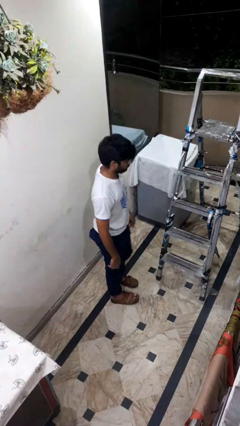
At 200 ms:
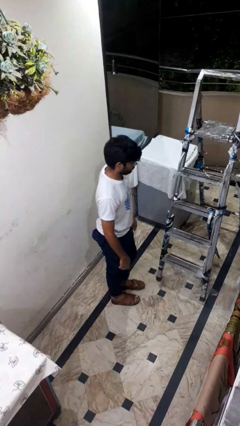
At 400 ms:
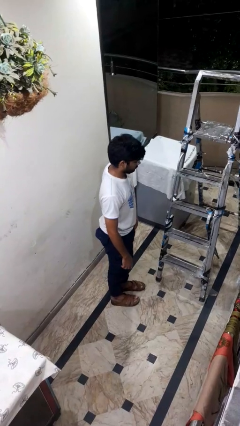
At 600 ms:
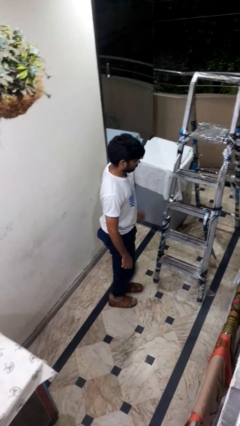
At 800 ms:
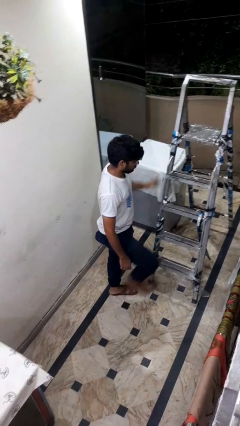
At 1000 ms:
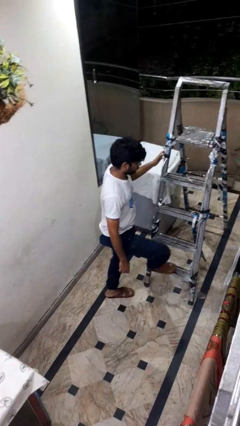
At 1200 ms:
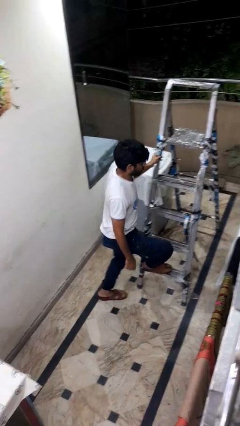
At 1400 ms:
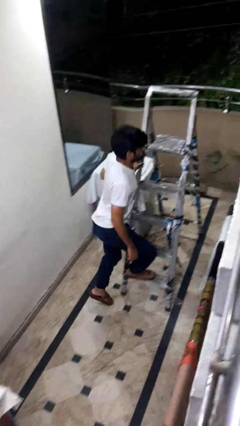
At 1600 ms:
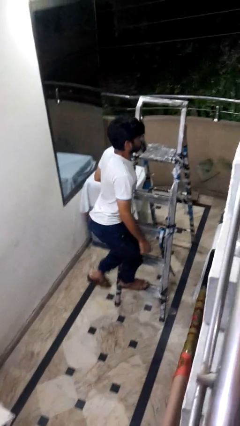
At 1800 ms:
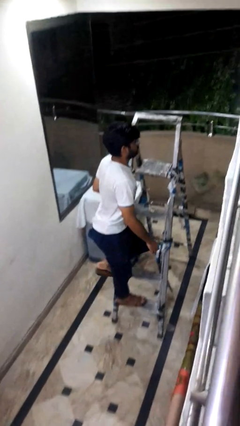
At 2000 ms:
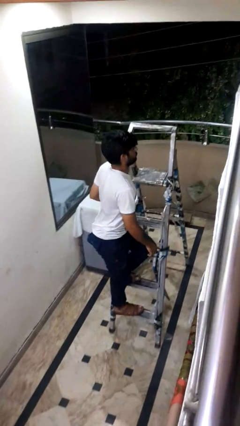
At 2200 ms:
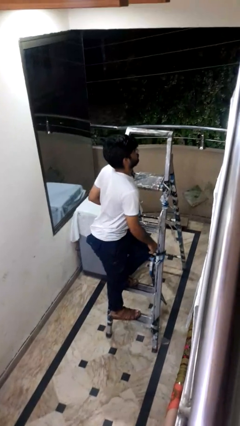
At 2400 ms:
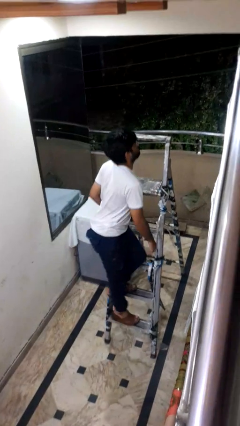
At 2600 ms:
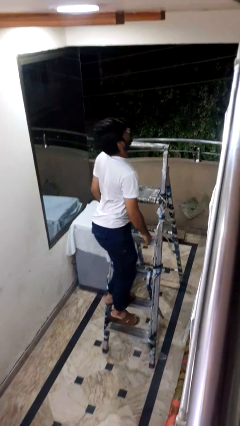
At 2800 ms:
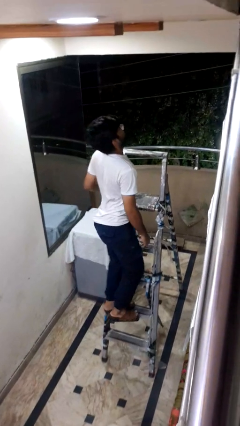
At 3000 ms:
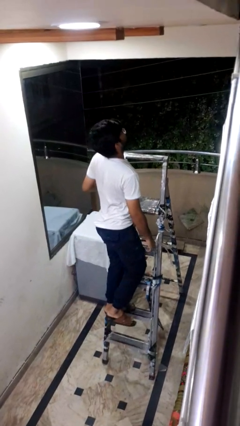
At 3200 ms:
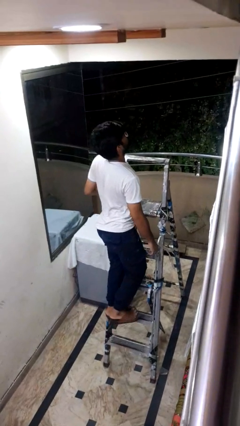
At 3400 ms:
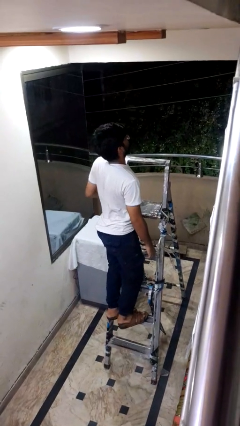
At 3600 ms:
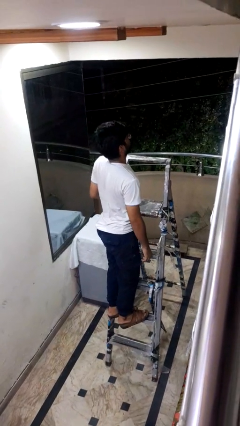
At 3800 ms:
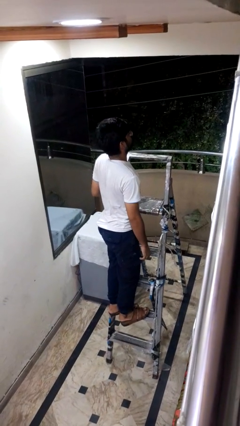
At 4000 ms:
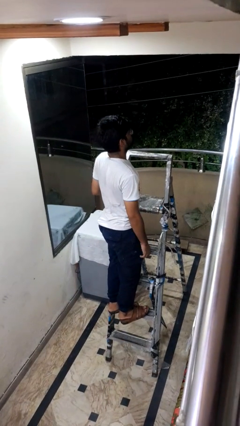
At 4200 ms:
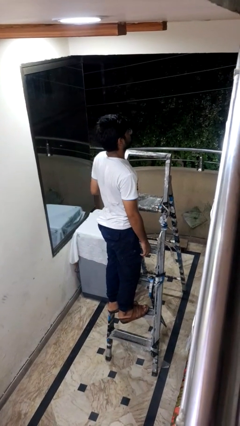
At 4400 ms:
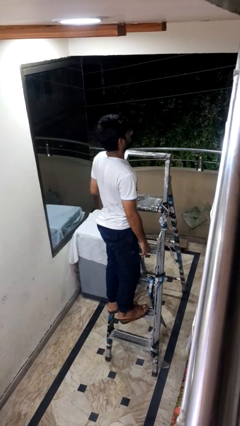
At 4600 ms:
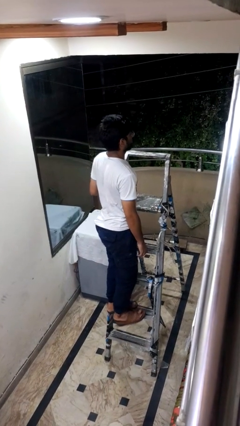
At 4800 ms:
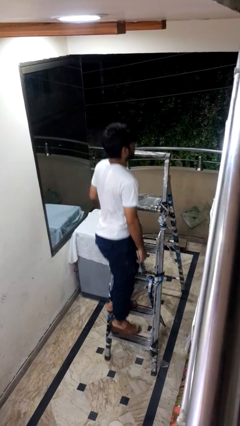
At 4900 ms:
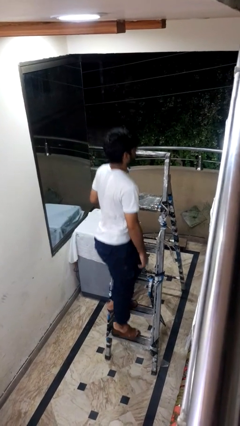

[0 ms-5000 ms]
person climbs up ladder

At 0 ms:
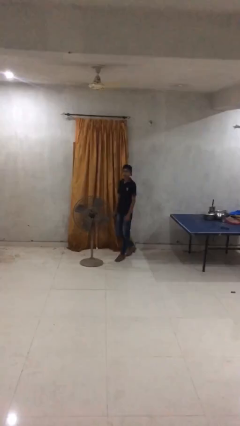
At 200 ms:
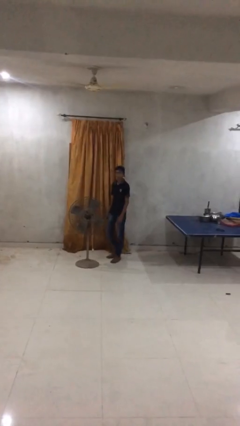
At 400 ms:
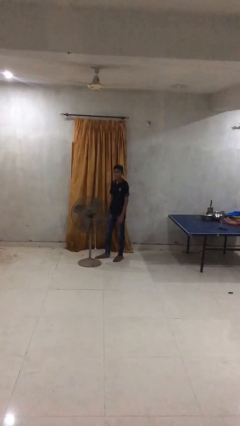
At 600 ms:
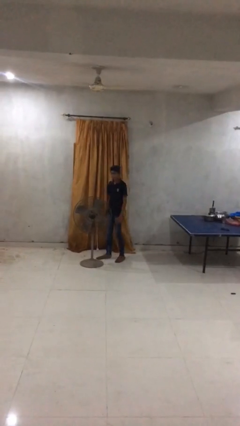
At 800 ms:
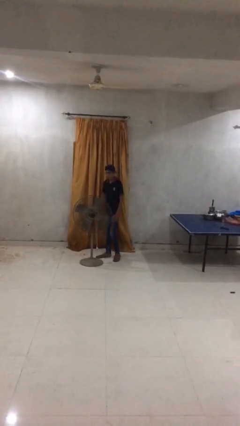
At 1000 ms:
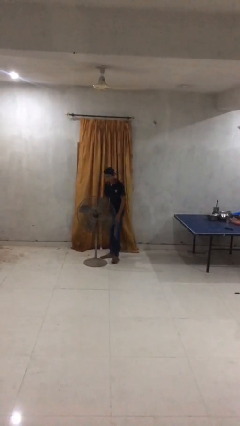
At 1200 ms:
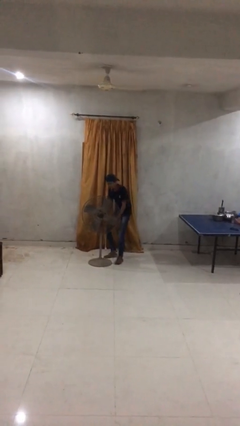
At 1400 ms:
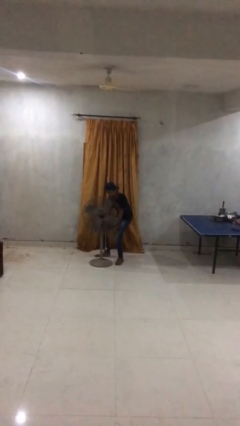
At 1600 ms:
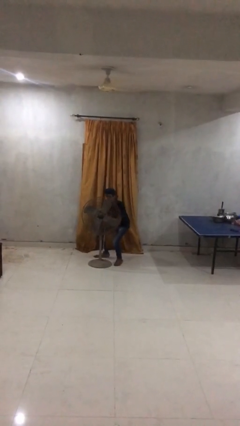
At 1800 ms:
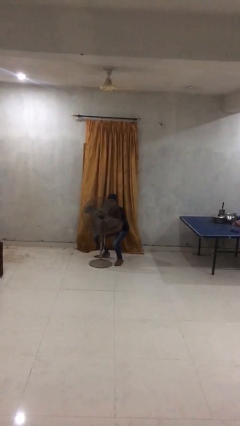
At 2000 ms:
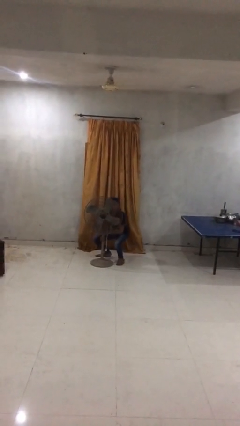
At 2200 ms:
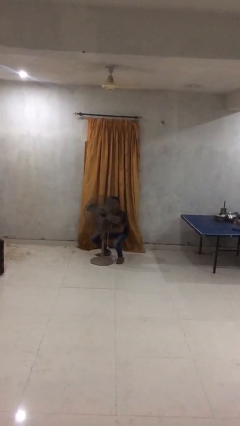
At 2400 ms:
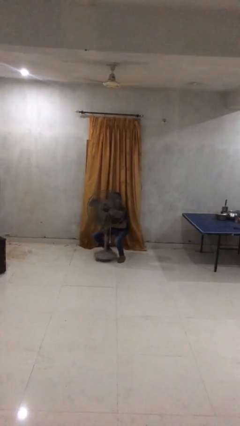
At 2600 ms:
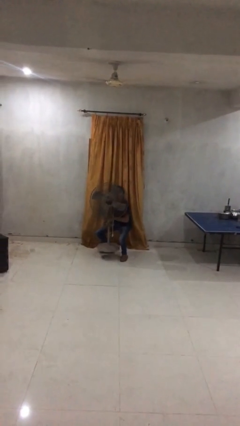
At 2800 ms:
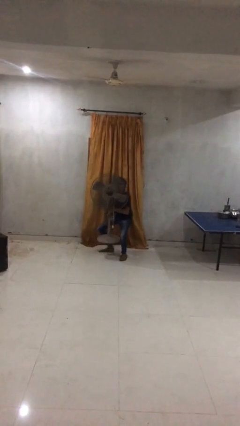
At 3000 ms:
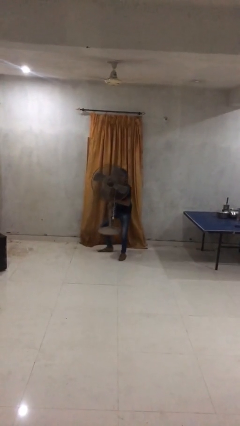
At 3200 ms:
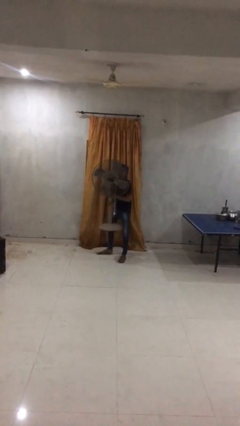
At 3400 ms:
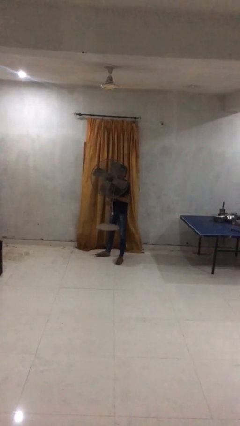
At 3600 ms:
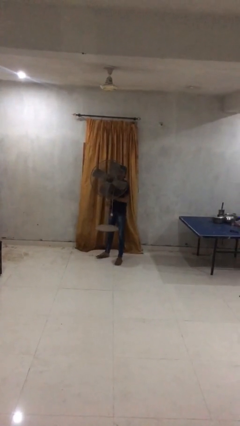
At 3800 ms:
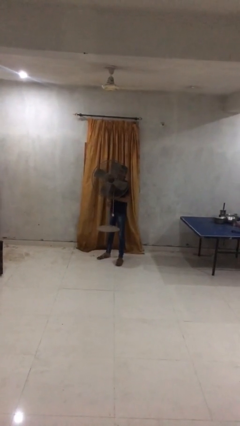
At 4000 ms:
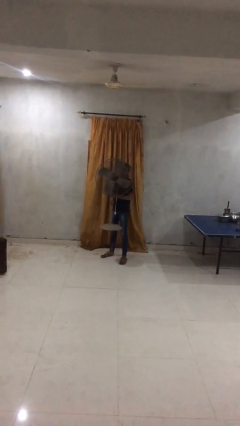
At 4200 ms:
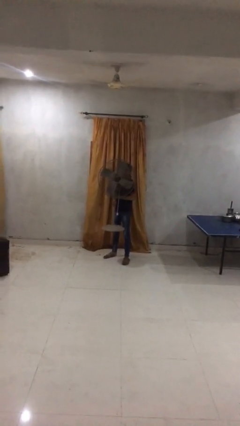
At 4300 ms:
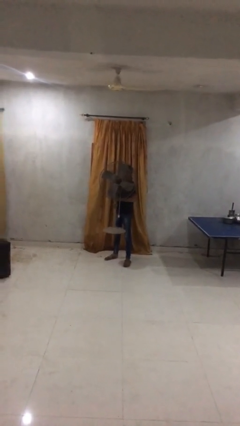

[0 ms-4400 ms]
person picks up object from floor

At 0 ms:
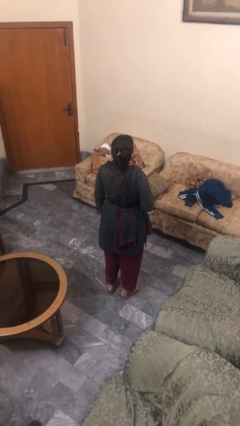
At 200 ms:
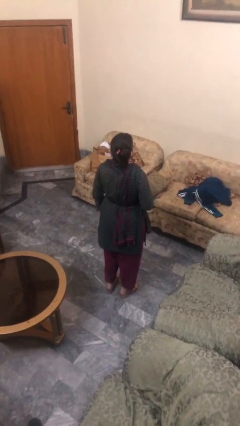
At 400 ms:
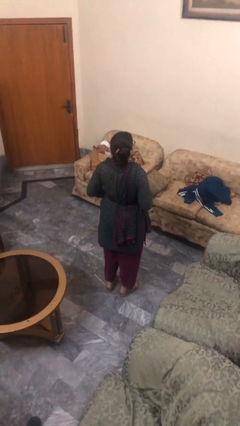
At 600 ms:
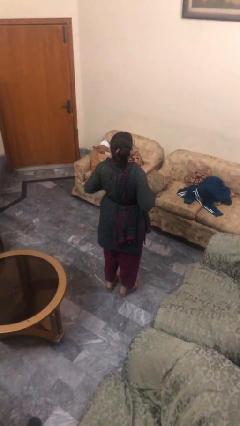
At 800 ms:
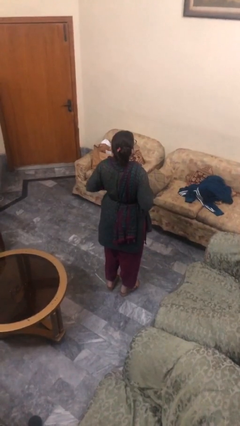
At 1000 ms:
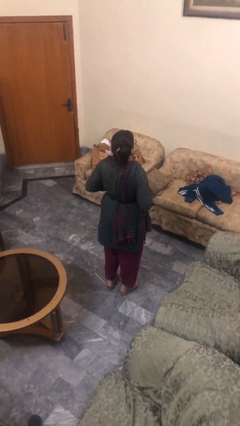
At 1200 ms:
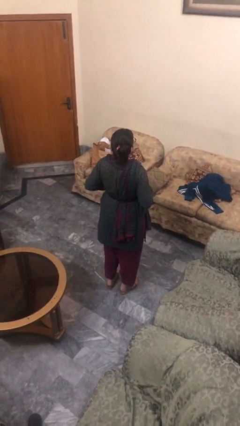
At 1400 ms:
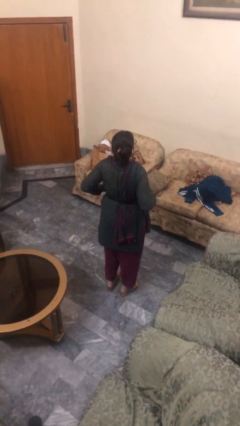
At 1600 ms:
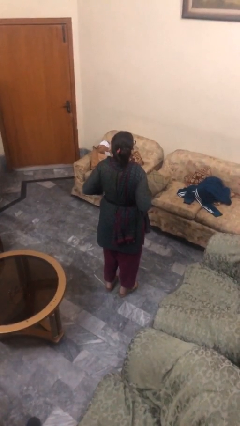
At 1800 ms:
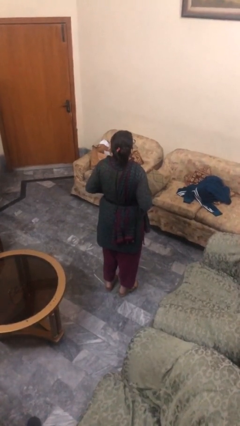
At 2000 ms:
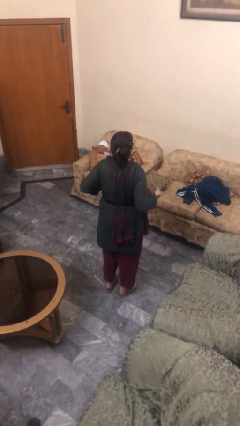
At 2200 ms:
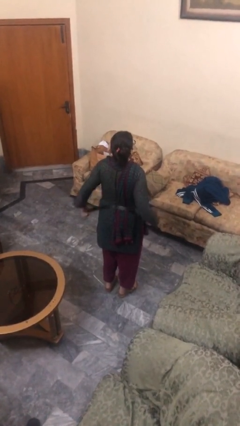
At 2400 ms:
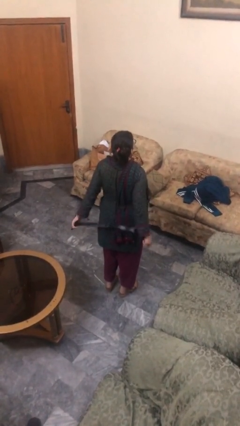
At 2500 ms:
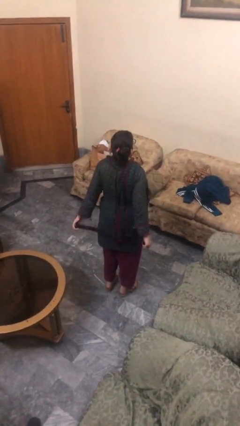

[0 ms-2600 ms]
person takes off belt

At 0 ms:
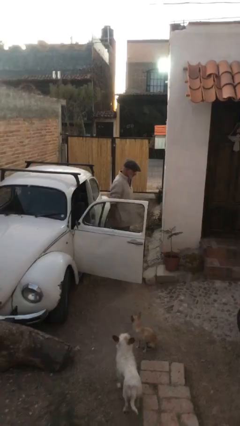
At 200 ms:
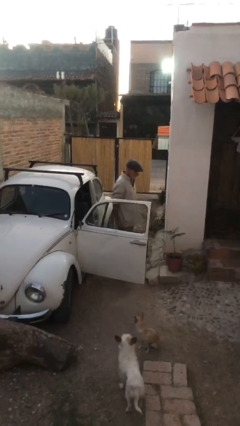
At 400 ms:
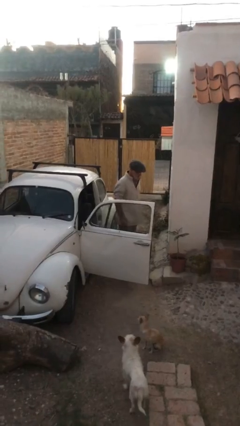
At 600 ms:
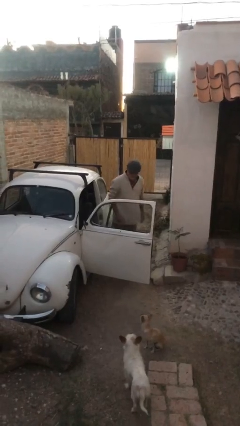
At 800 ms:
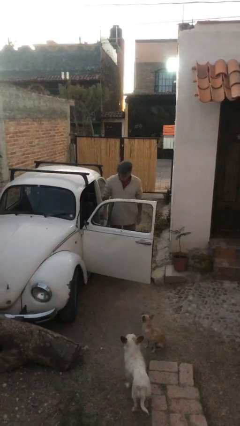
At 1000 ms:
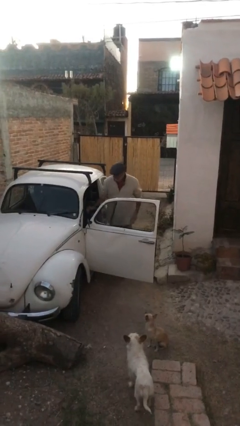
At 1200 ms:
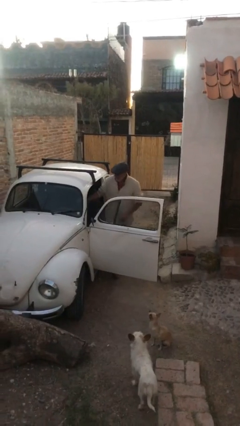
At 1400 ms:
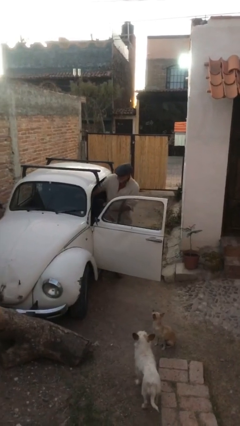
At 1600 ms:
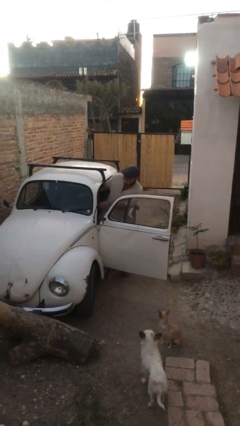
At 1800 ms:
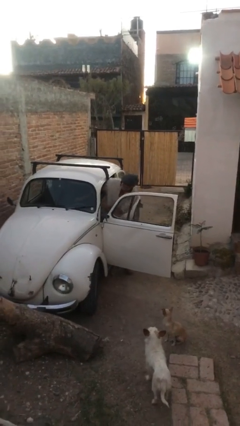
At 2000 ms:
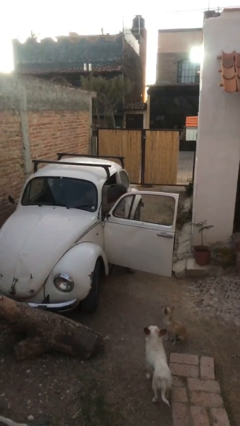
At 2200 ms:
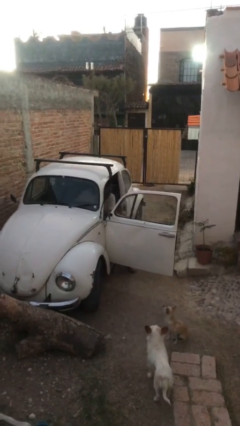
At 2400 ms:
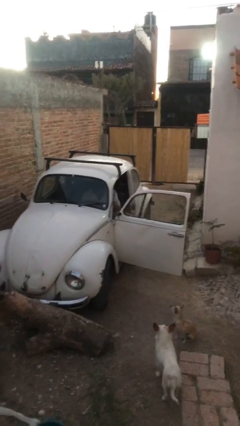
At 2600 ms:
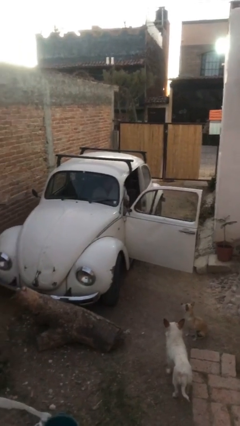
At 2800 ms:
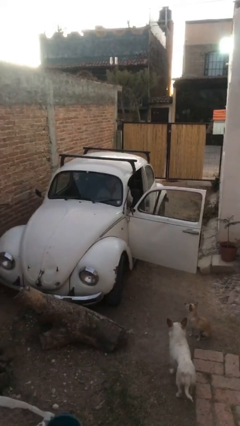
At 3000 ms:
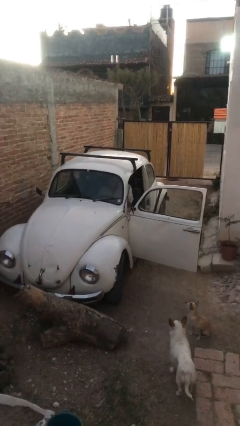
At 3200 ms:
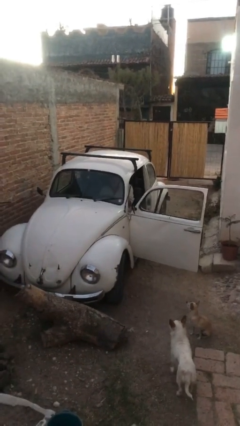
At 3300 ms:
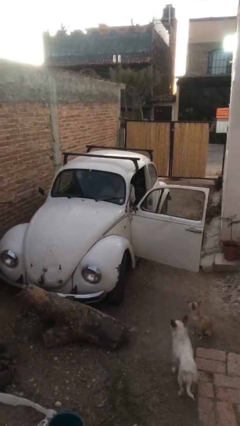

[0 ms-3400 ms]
person enters car

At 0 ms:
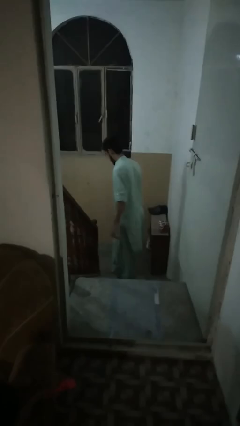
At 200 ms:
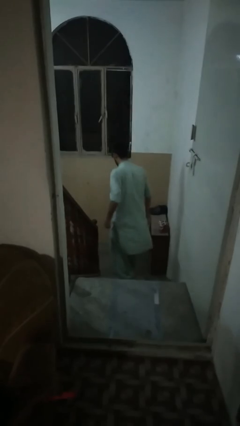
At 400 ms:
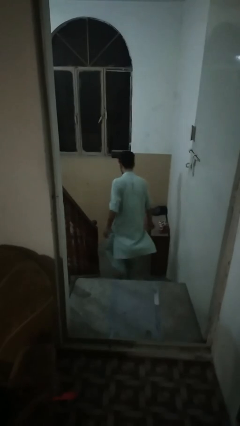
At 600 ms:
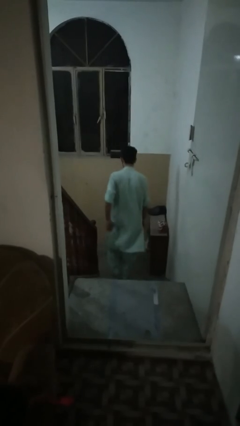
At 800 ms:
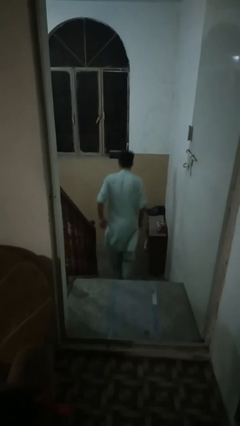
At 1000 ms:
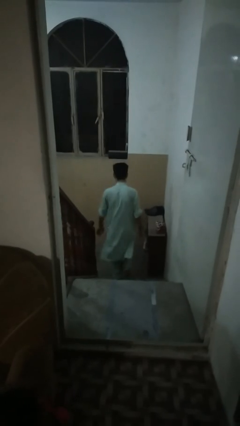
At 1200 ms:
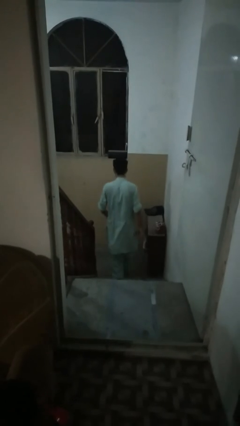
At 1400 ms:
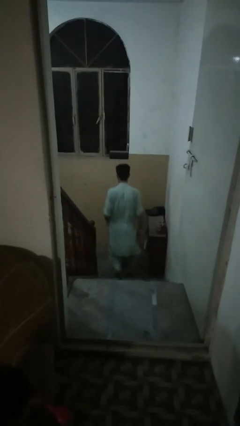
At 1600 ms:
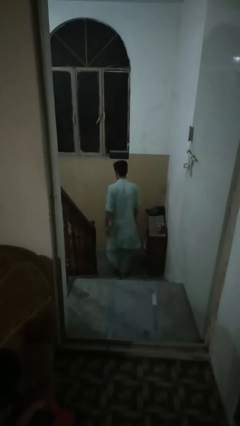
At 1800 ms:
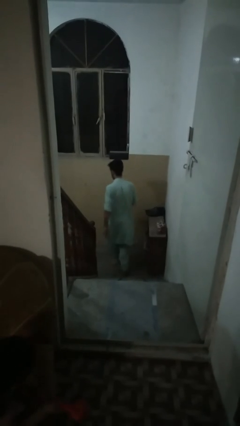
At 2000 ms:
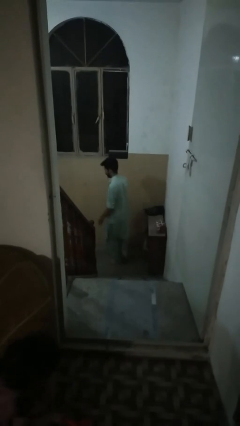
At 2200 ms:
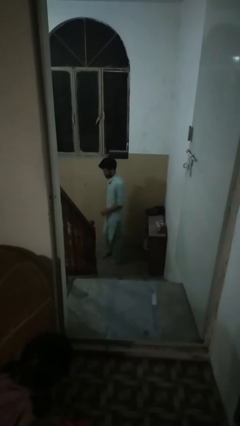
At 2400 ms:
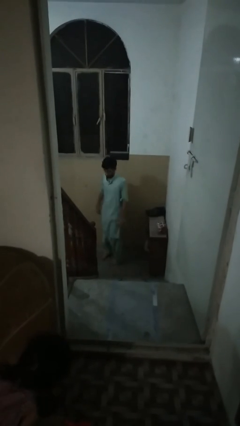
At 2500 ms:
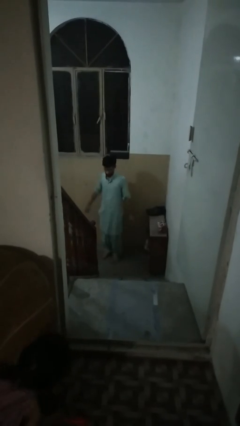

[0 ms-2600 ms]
person climbs down stairs
